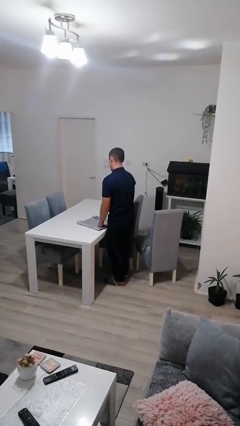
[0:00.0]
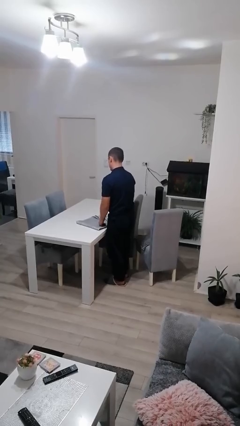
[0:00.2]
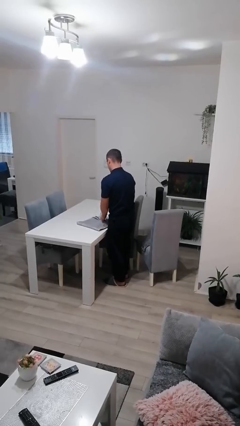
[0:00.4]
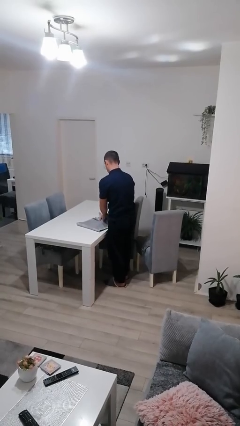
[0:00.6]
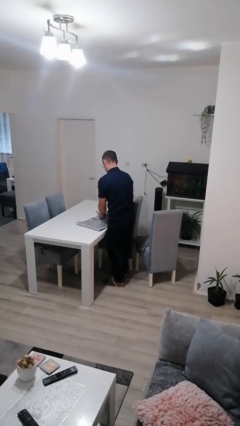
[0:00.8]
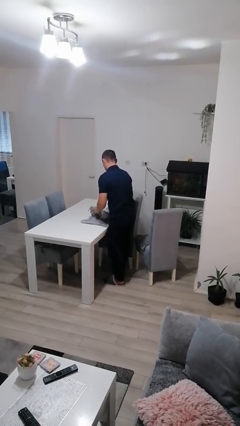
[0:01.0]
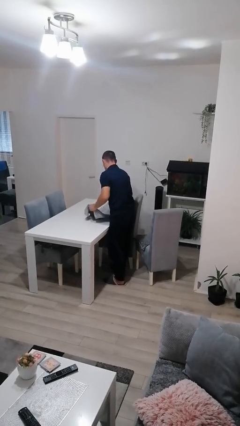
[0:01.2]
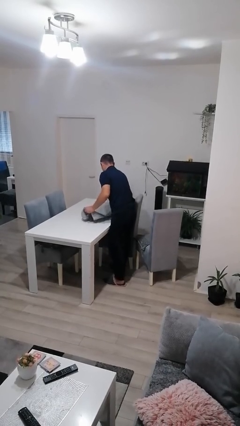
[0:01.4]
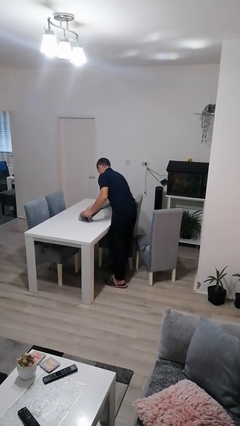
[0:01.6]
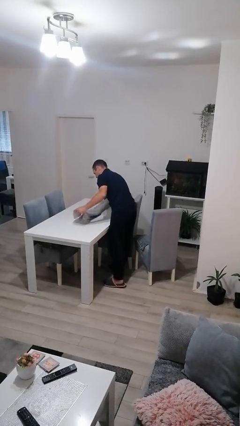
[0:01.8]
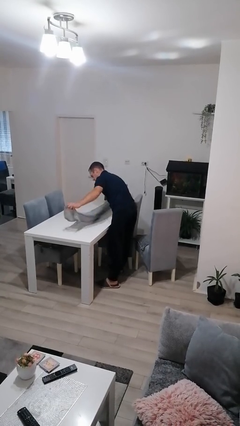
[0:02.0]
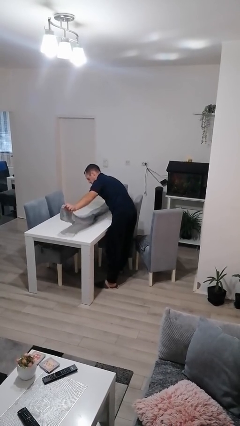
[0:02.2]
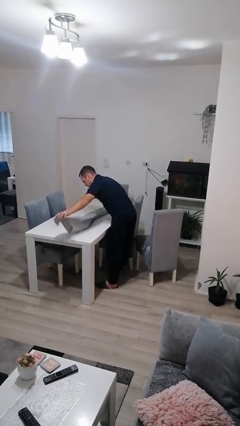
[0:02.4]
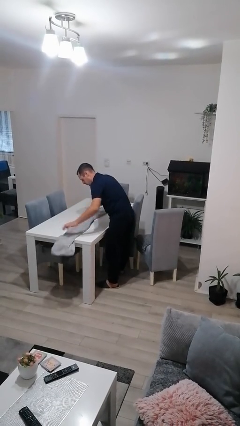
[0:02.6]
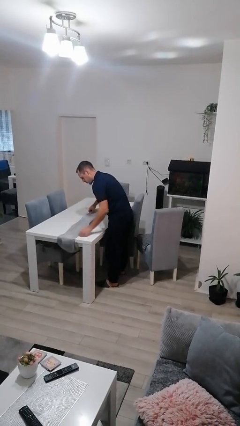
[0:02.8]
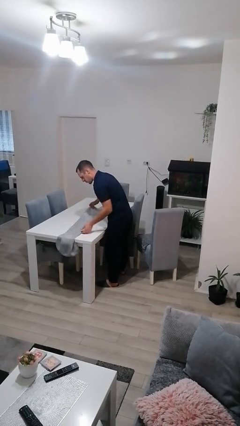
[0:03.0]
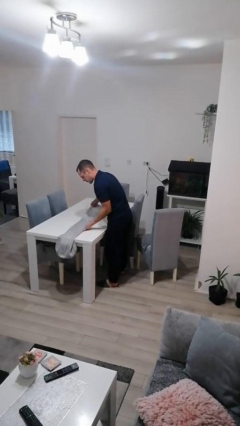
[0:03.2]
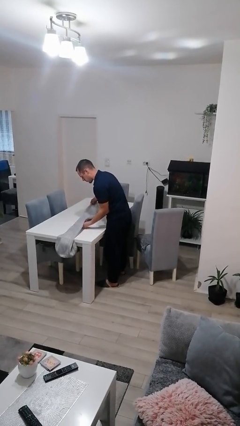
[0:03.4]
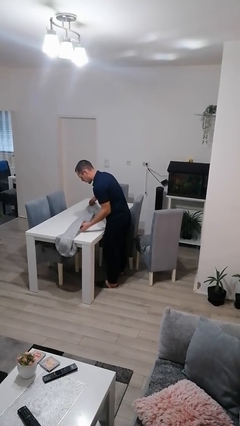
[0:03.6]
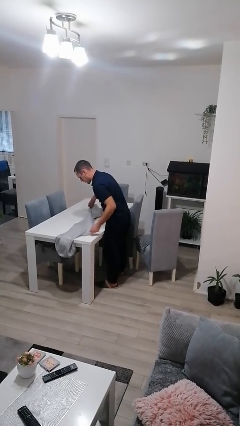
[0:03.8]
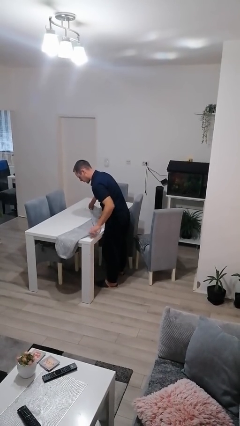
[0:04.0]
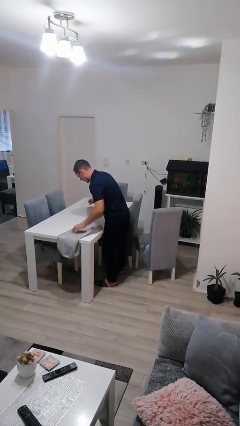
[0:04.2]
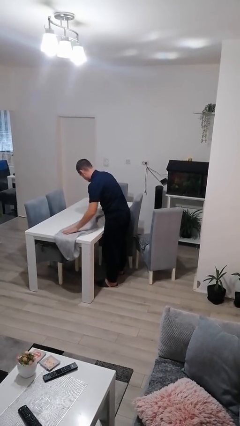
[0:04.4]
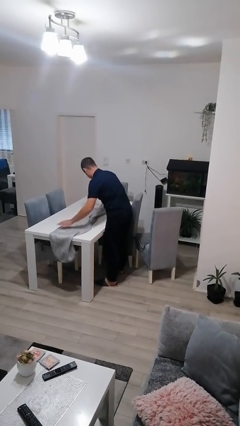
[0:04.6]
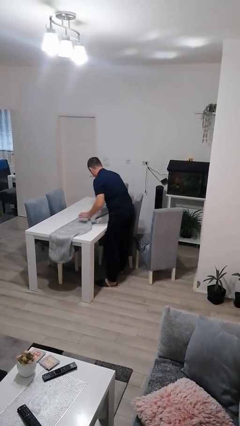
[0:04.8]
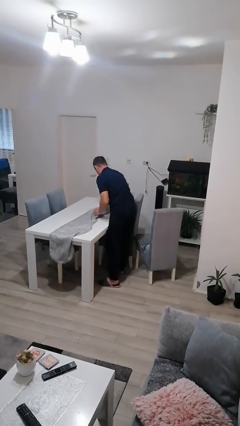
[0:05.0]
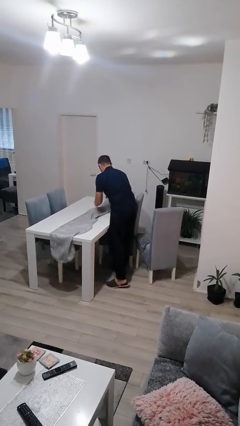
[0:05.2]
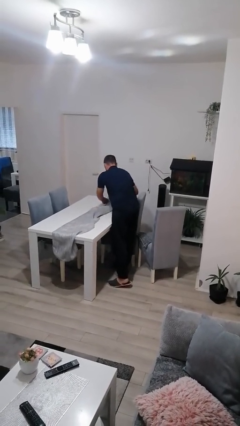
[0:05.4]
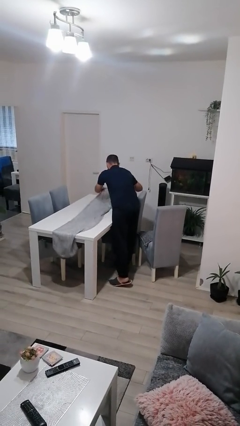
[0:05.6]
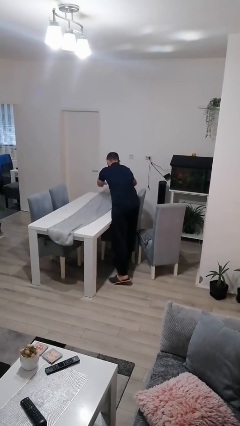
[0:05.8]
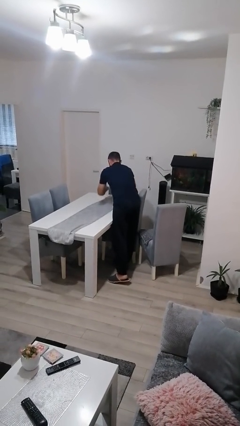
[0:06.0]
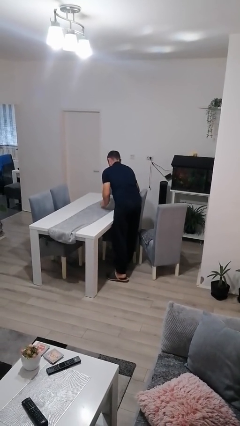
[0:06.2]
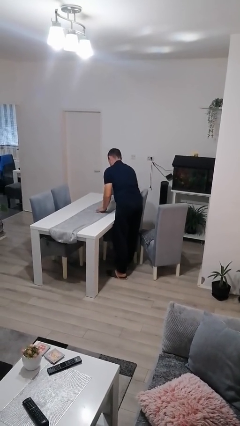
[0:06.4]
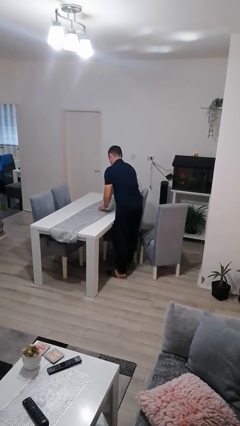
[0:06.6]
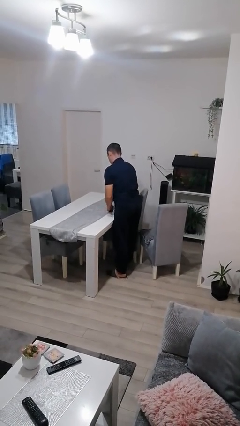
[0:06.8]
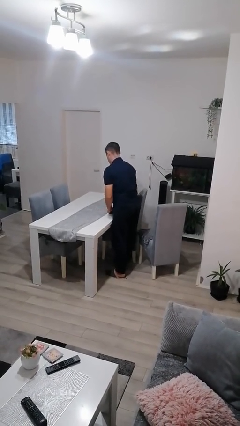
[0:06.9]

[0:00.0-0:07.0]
person spreads tablecloth

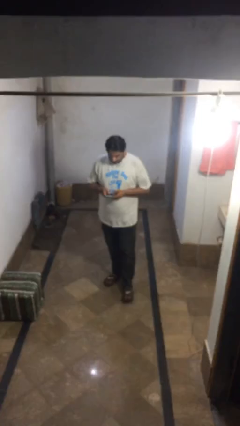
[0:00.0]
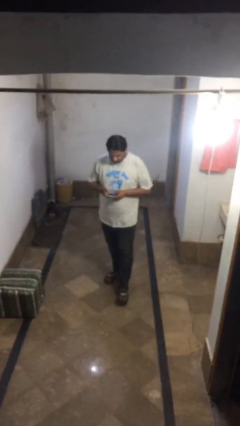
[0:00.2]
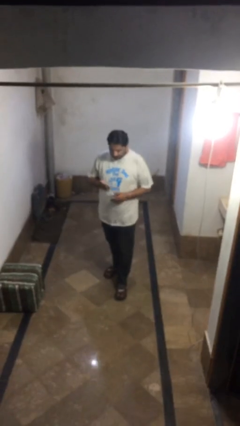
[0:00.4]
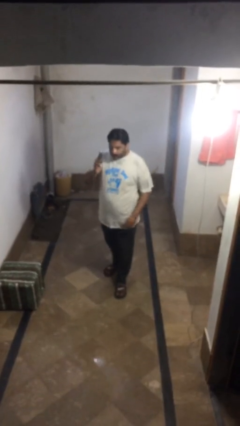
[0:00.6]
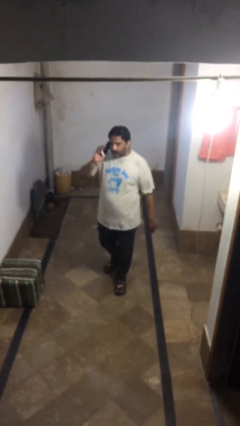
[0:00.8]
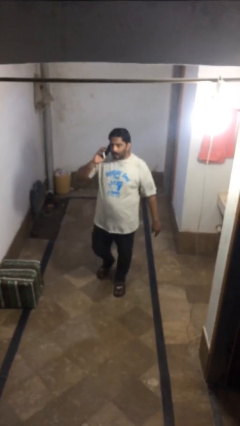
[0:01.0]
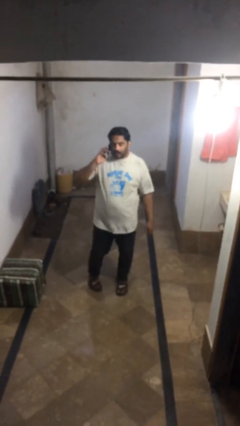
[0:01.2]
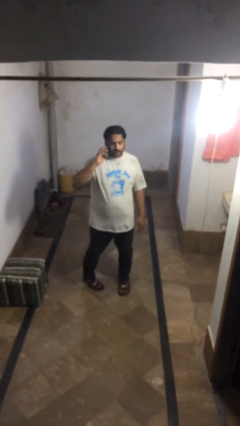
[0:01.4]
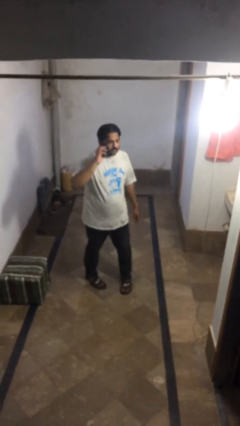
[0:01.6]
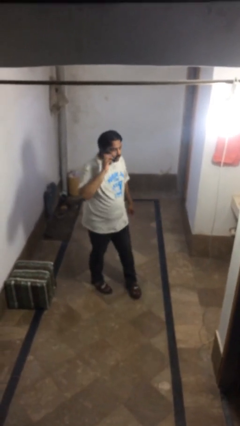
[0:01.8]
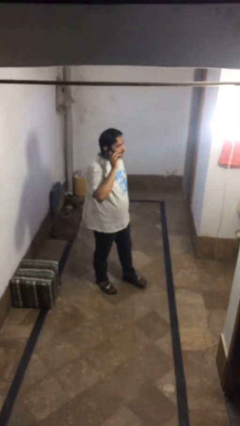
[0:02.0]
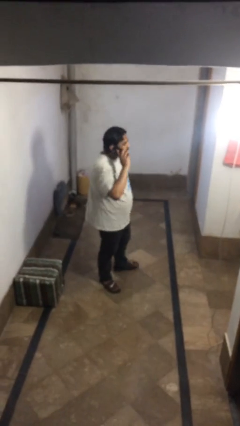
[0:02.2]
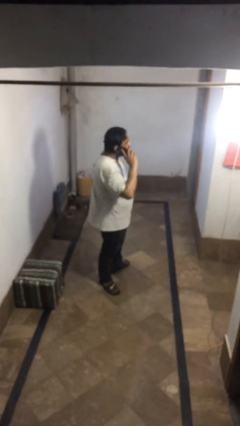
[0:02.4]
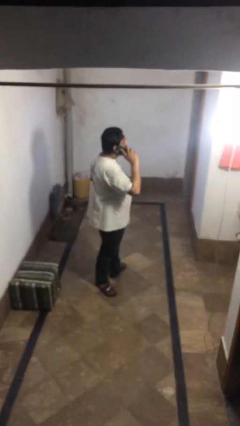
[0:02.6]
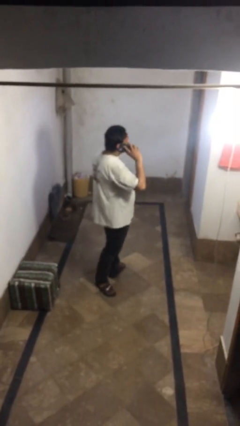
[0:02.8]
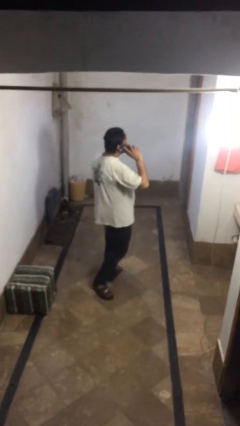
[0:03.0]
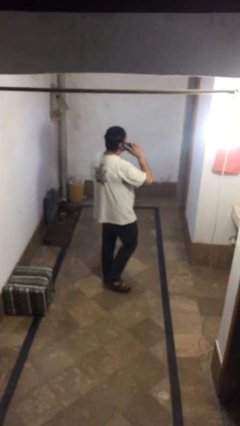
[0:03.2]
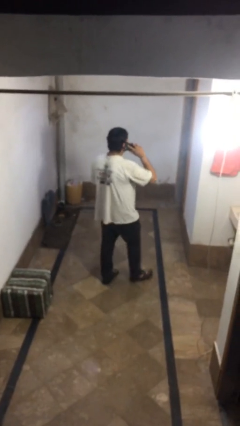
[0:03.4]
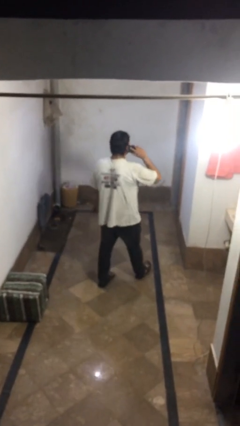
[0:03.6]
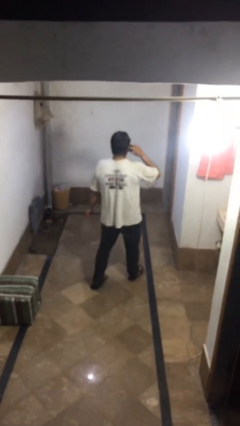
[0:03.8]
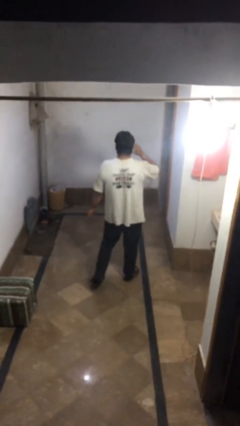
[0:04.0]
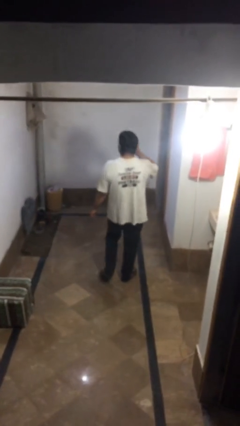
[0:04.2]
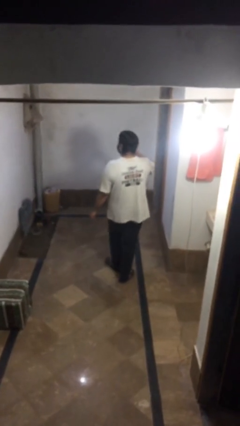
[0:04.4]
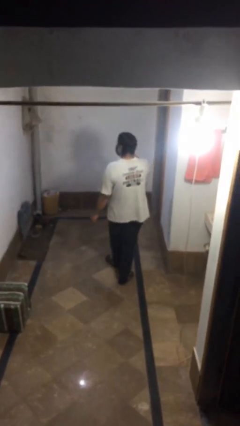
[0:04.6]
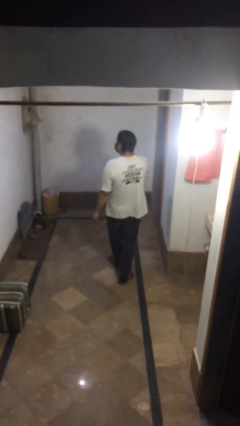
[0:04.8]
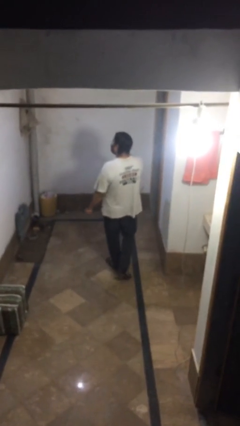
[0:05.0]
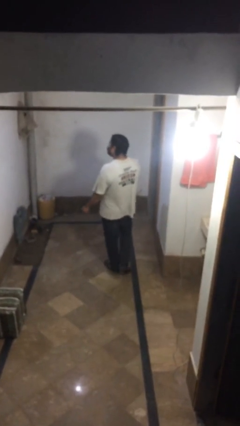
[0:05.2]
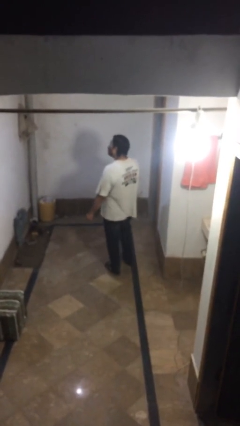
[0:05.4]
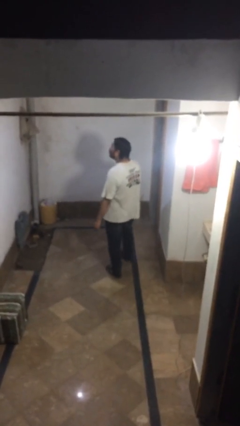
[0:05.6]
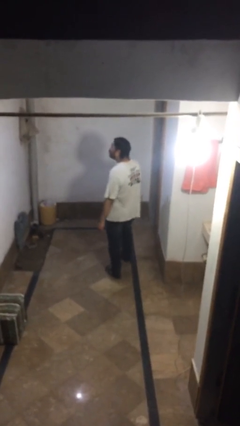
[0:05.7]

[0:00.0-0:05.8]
person talks on phone

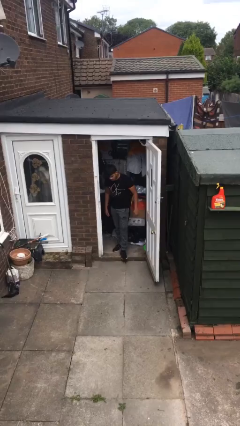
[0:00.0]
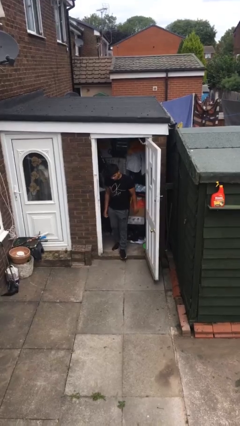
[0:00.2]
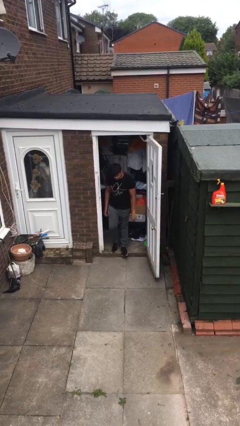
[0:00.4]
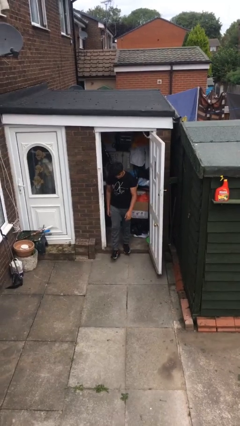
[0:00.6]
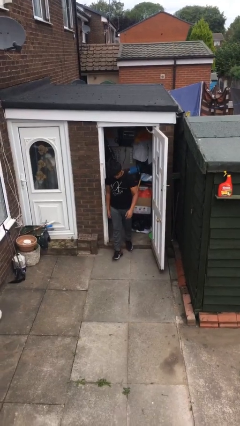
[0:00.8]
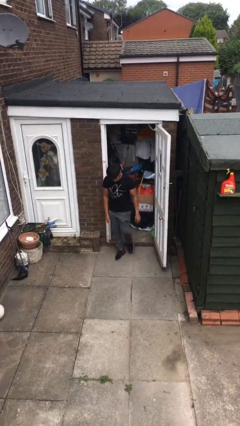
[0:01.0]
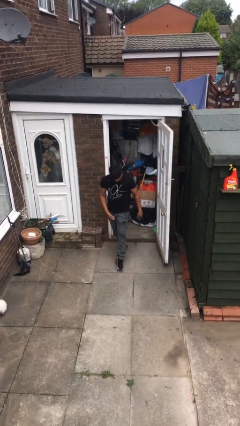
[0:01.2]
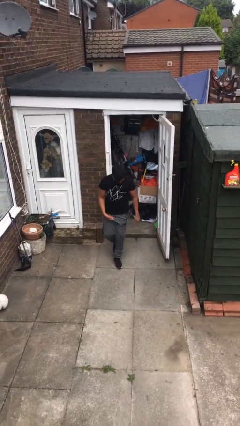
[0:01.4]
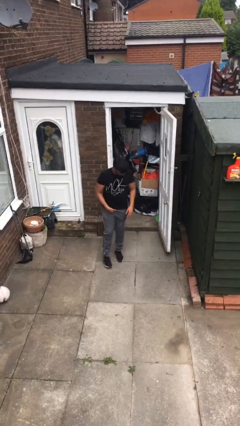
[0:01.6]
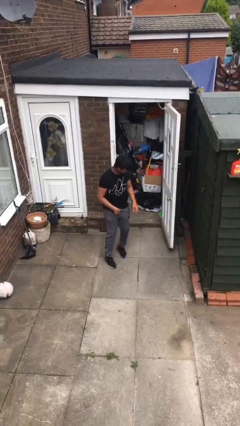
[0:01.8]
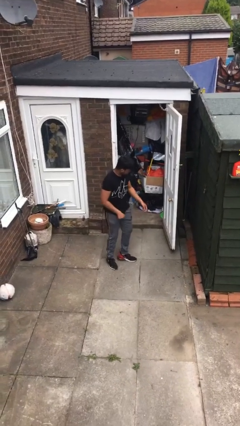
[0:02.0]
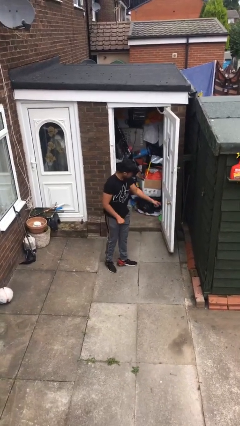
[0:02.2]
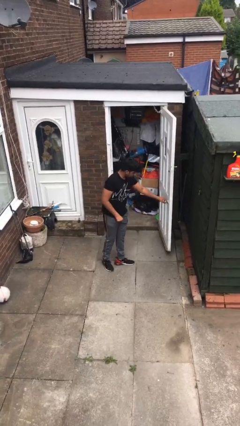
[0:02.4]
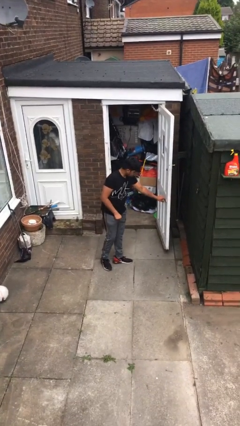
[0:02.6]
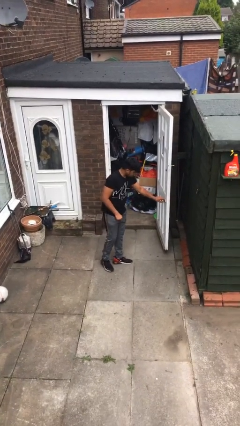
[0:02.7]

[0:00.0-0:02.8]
person enters scene through structure

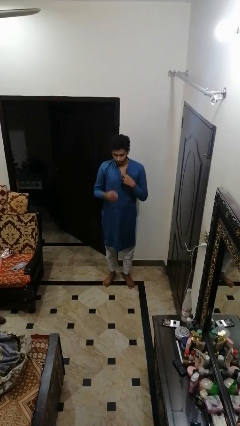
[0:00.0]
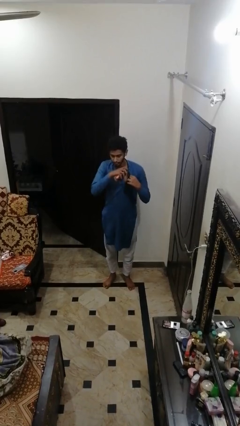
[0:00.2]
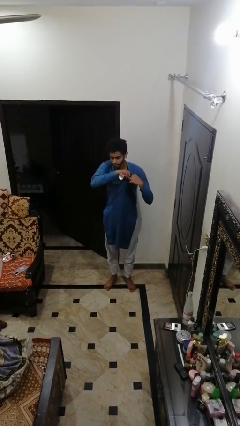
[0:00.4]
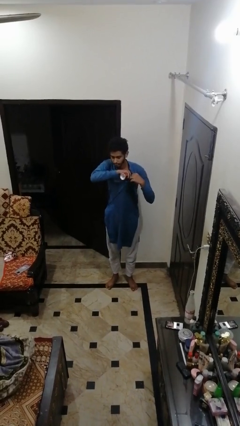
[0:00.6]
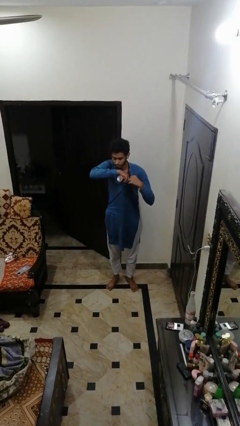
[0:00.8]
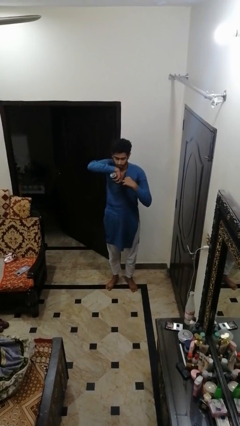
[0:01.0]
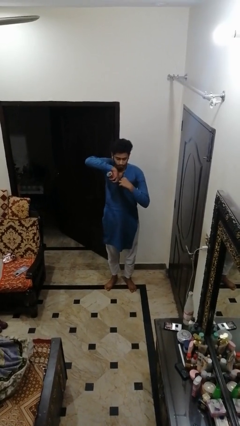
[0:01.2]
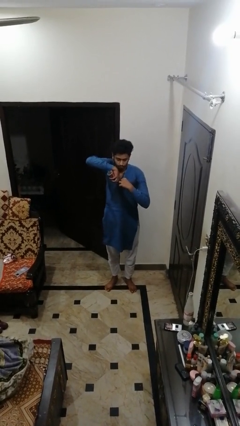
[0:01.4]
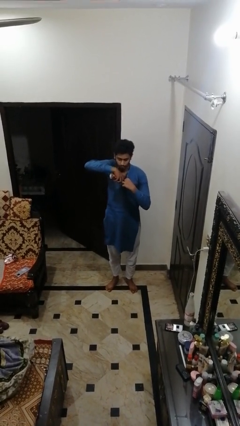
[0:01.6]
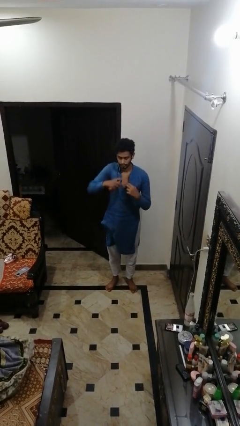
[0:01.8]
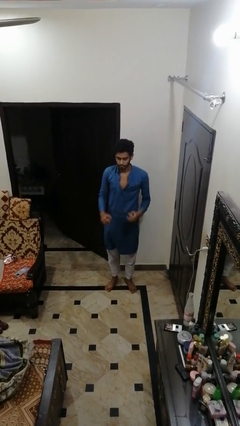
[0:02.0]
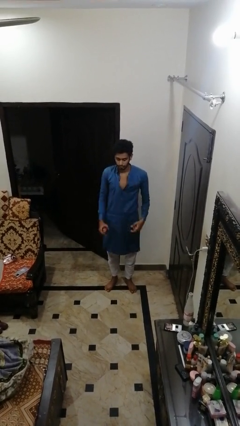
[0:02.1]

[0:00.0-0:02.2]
person applies deodorant

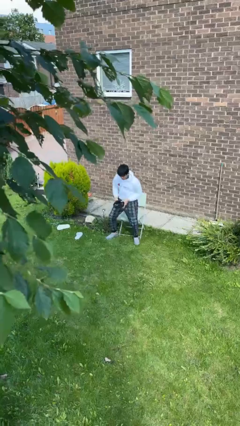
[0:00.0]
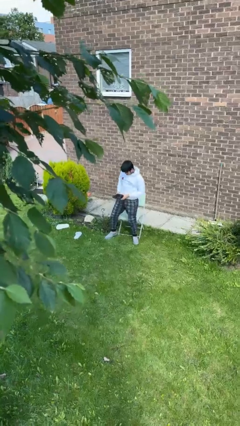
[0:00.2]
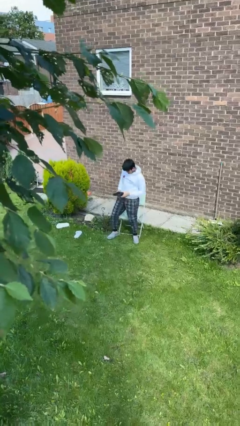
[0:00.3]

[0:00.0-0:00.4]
person takes off headphones
